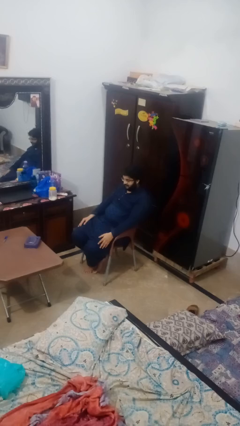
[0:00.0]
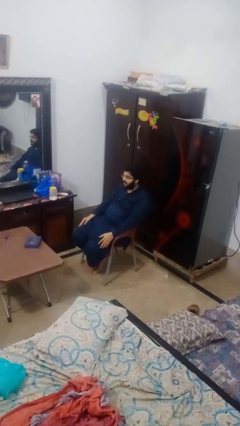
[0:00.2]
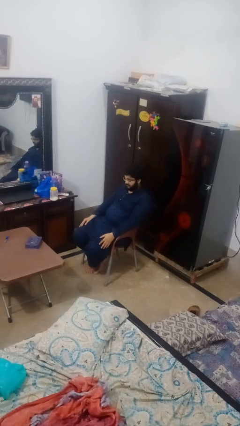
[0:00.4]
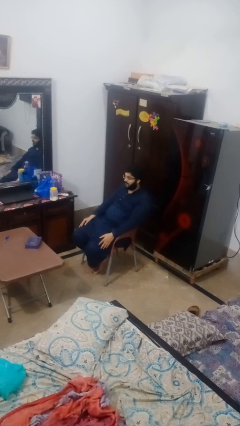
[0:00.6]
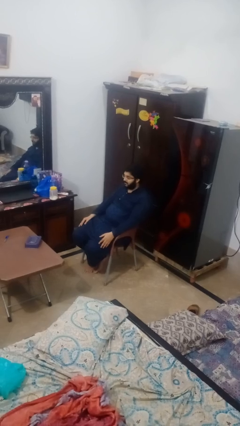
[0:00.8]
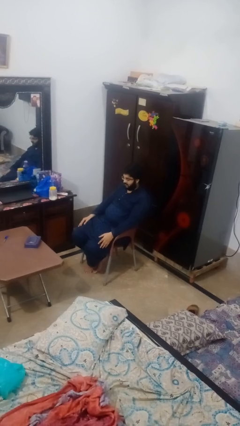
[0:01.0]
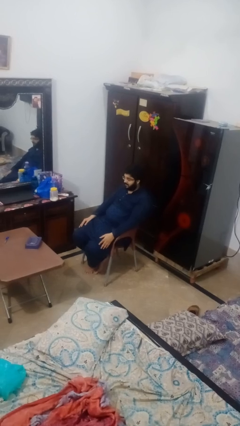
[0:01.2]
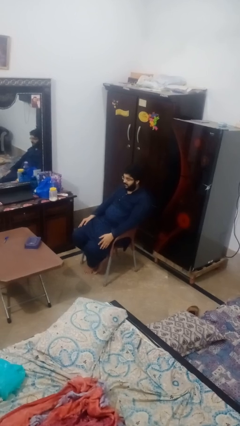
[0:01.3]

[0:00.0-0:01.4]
person nods head

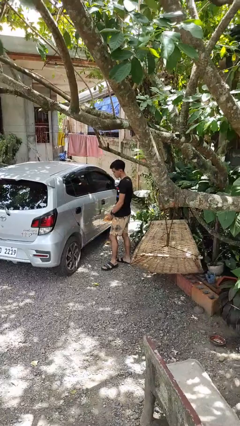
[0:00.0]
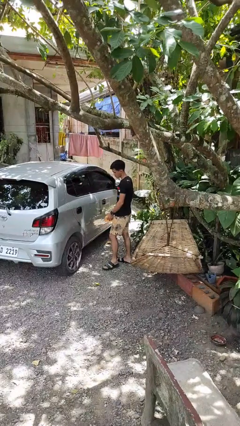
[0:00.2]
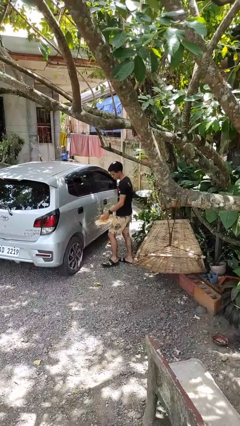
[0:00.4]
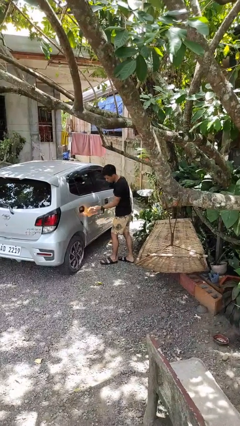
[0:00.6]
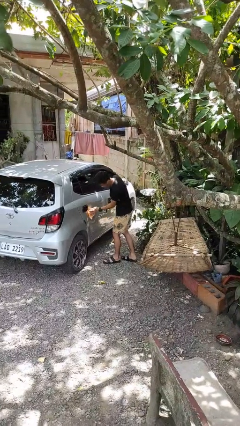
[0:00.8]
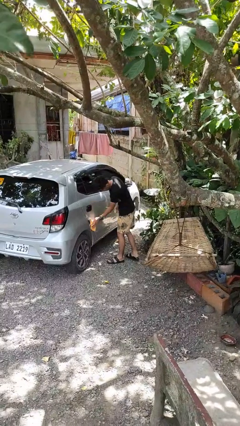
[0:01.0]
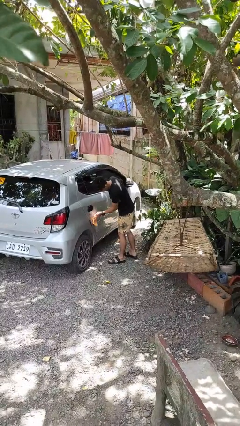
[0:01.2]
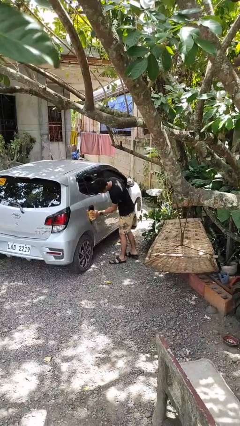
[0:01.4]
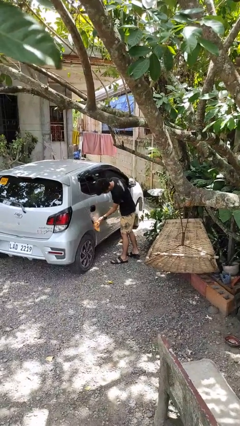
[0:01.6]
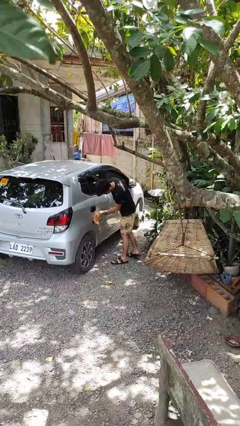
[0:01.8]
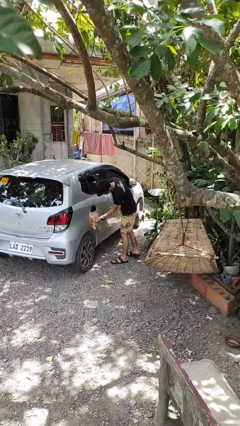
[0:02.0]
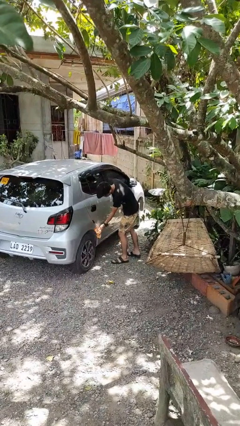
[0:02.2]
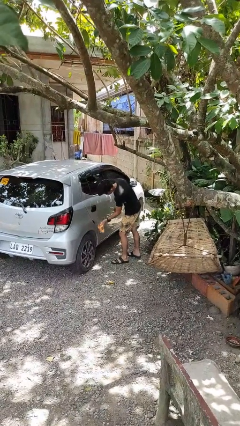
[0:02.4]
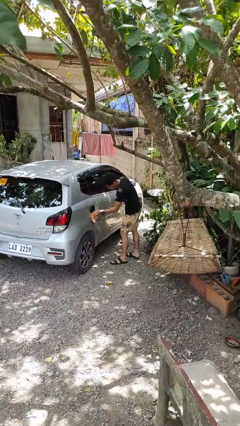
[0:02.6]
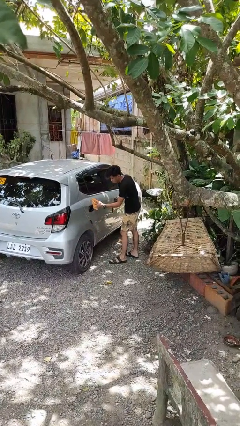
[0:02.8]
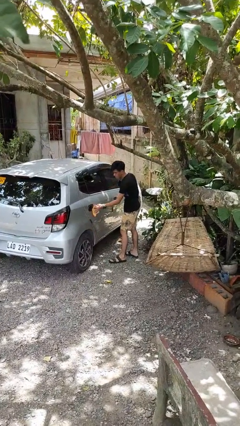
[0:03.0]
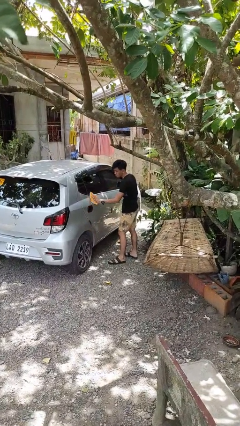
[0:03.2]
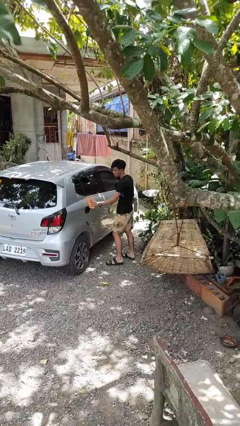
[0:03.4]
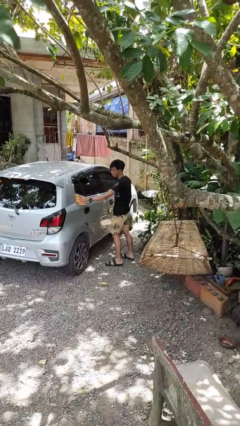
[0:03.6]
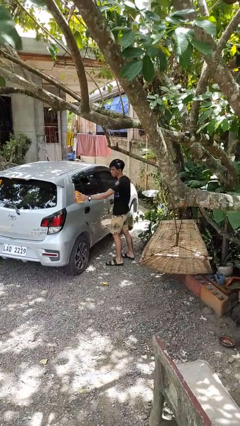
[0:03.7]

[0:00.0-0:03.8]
person polishes car with rag

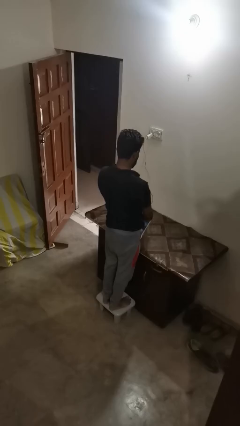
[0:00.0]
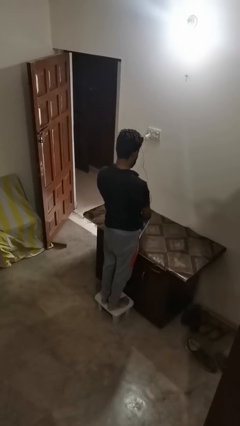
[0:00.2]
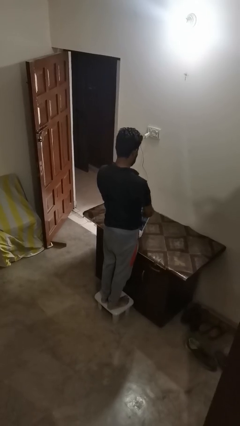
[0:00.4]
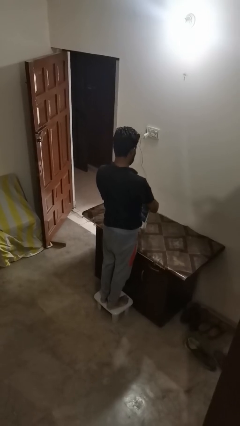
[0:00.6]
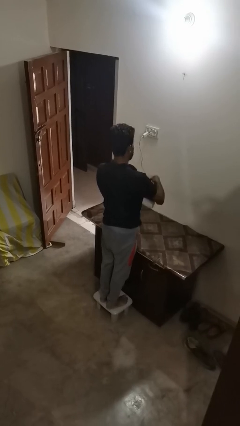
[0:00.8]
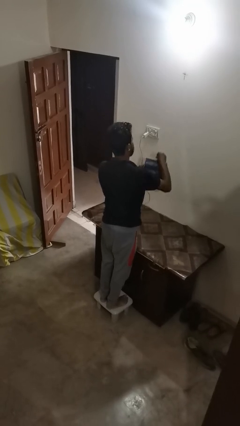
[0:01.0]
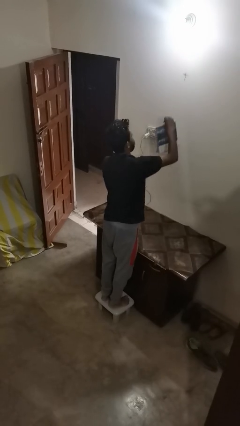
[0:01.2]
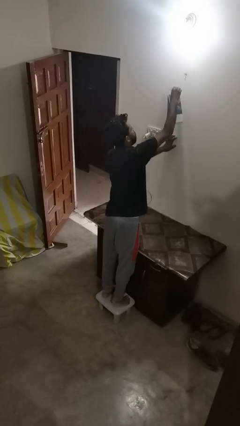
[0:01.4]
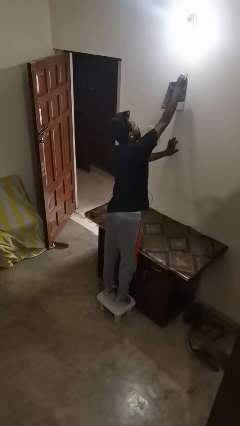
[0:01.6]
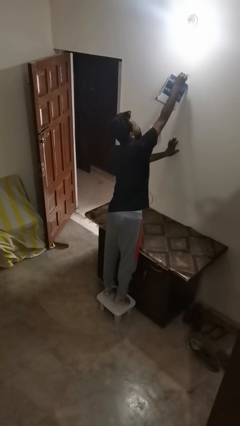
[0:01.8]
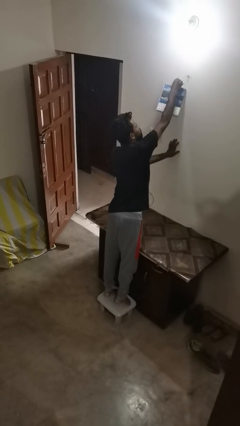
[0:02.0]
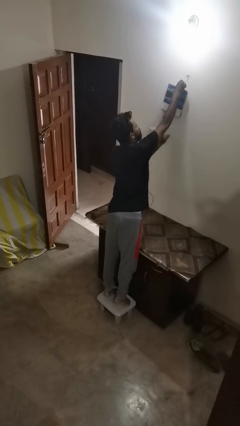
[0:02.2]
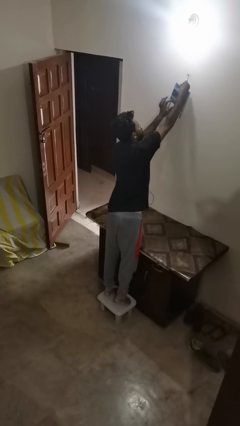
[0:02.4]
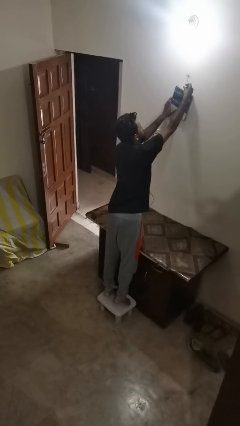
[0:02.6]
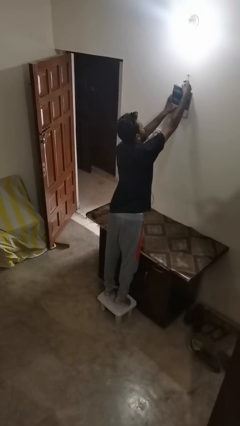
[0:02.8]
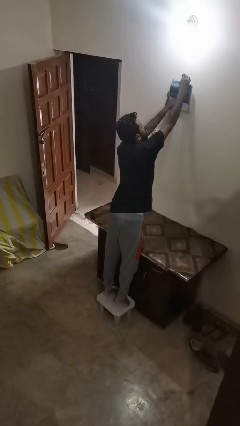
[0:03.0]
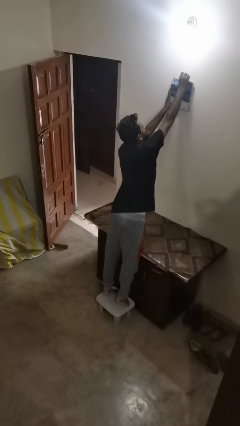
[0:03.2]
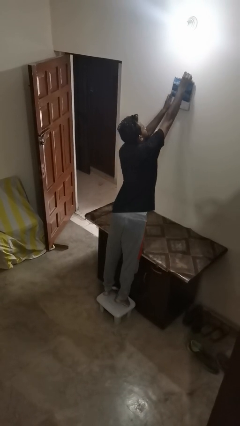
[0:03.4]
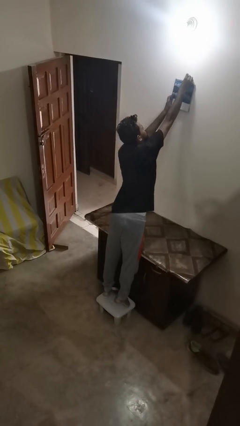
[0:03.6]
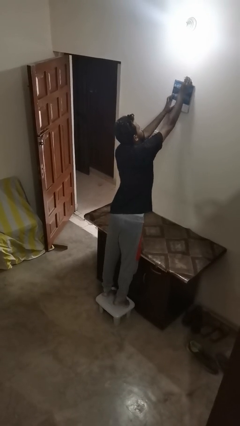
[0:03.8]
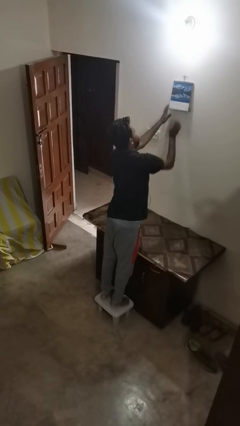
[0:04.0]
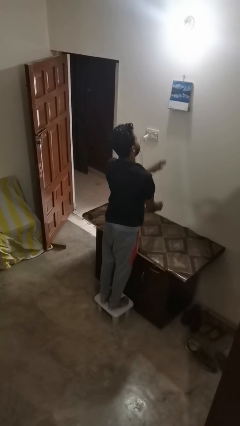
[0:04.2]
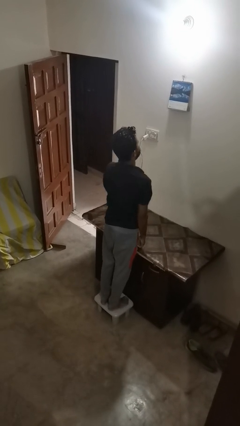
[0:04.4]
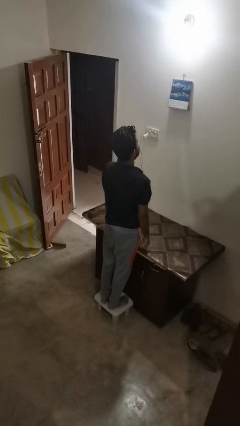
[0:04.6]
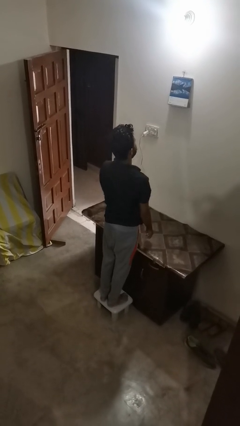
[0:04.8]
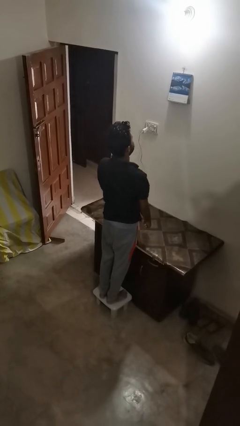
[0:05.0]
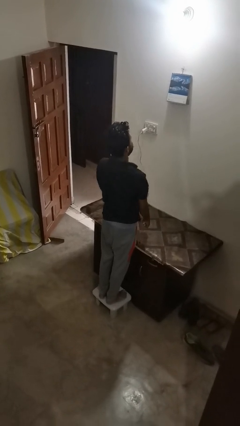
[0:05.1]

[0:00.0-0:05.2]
person puts up picture frame

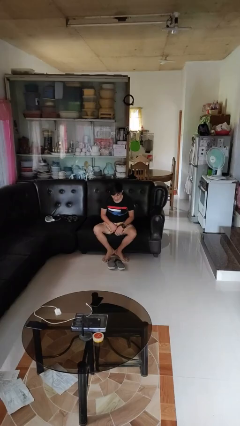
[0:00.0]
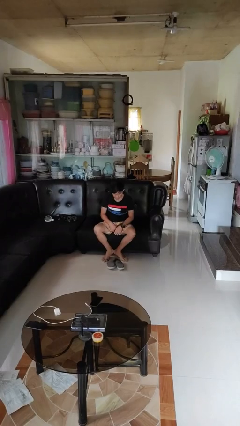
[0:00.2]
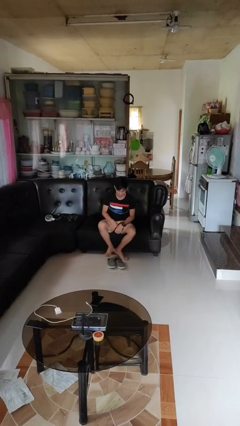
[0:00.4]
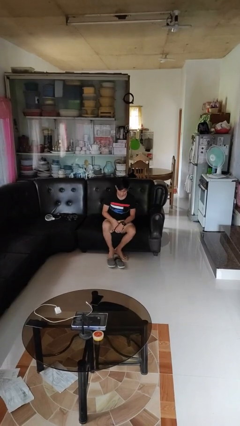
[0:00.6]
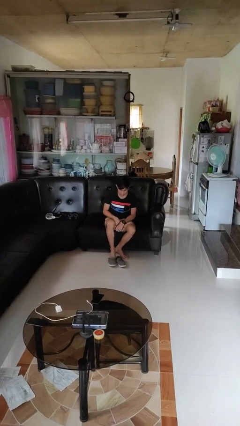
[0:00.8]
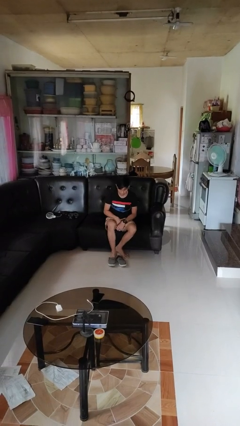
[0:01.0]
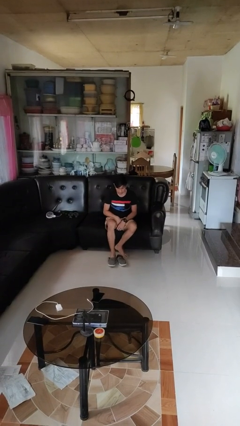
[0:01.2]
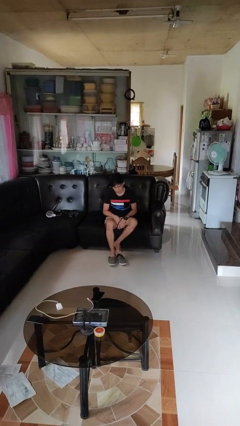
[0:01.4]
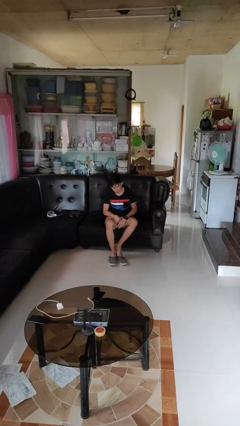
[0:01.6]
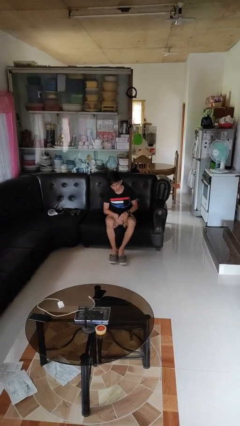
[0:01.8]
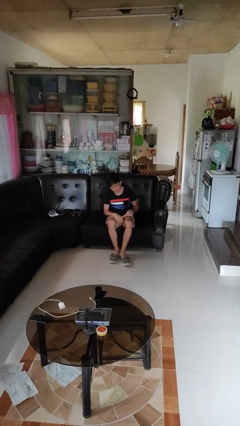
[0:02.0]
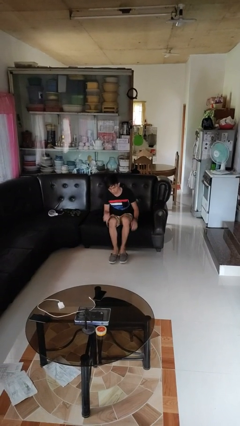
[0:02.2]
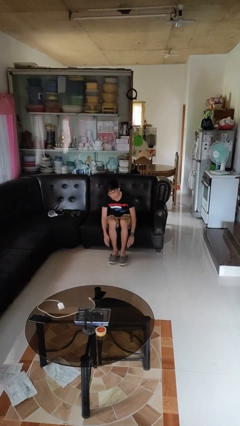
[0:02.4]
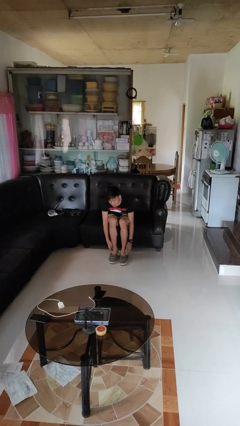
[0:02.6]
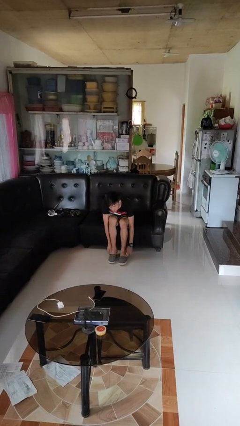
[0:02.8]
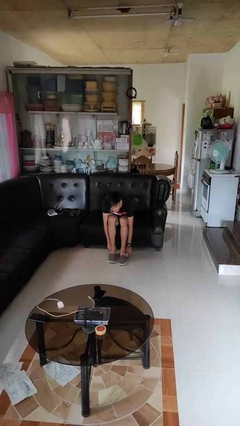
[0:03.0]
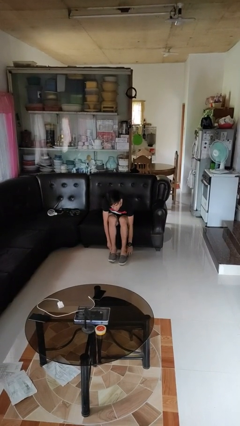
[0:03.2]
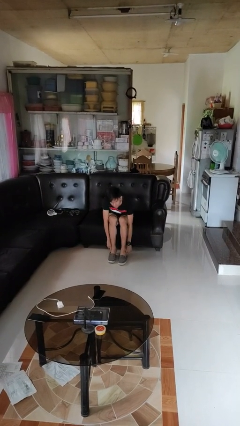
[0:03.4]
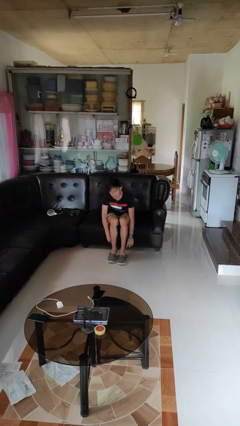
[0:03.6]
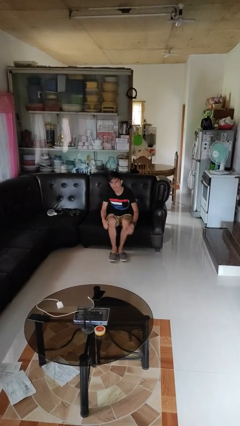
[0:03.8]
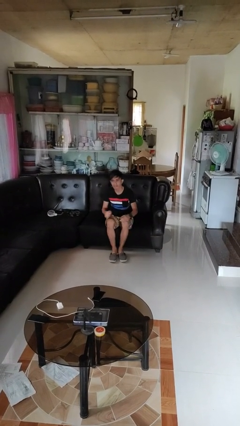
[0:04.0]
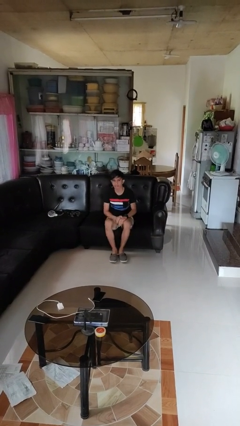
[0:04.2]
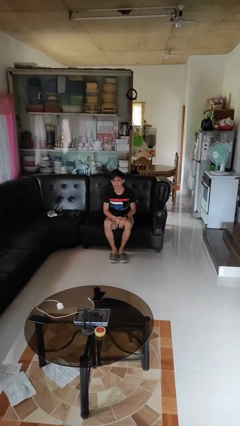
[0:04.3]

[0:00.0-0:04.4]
person puts on shoes

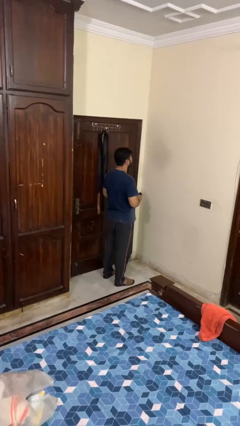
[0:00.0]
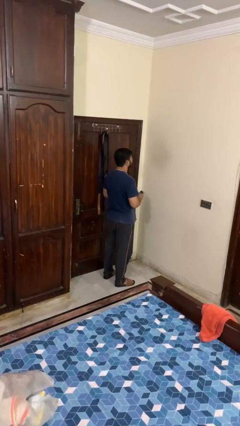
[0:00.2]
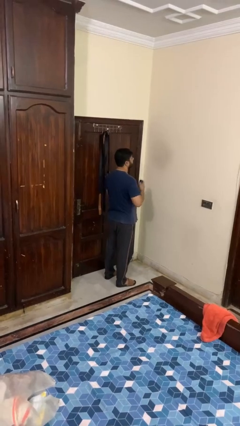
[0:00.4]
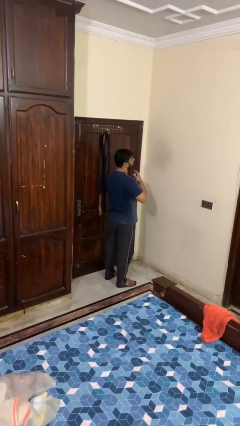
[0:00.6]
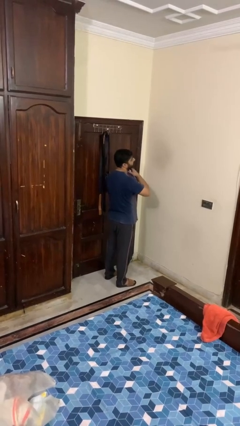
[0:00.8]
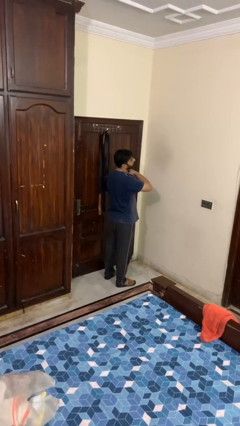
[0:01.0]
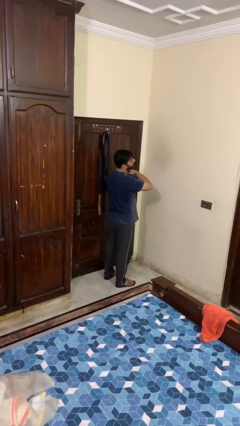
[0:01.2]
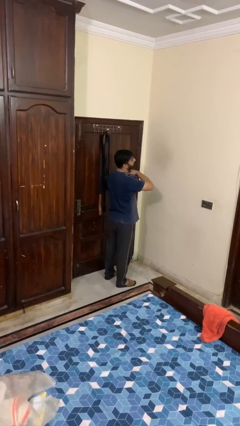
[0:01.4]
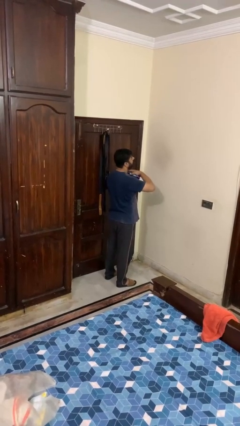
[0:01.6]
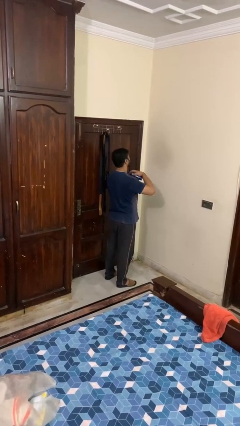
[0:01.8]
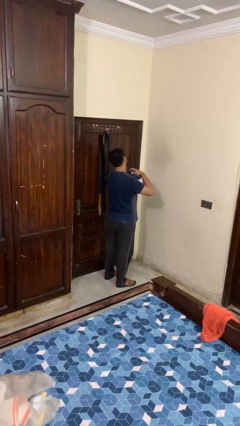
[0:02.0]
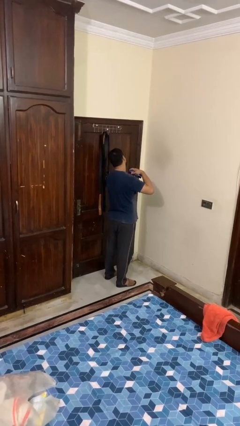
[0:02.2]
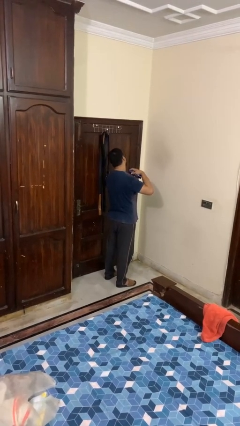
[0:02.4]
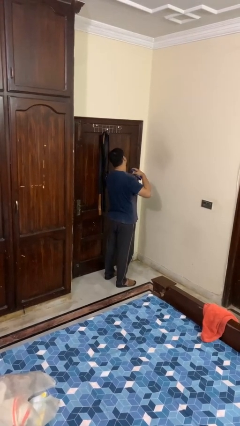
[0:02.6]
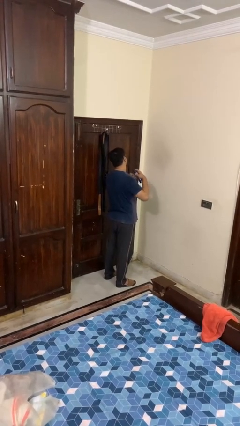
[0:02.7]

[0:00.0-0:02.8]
person applies deodorant

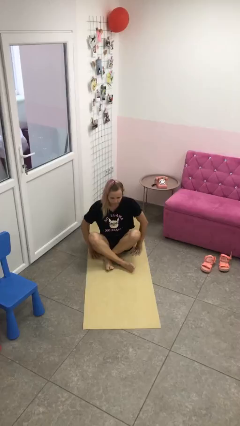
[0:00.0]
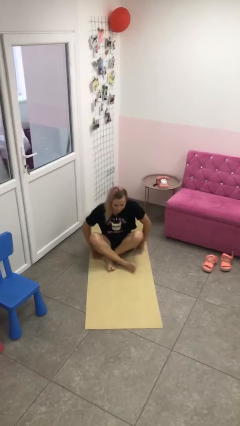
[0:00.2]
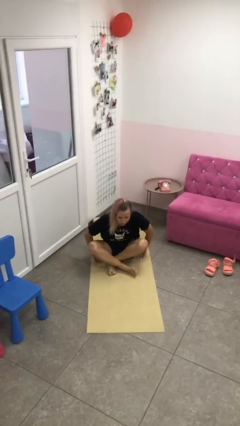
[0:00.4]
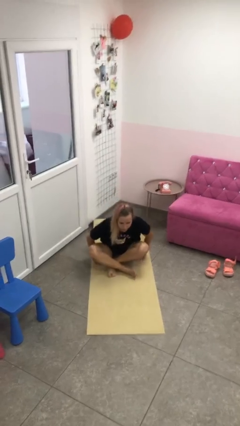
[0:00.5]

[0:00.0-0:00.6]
person sits crisscross
